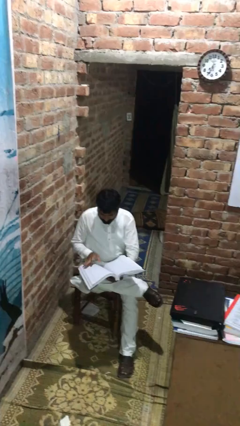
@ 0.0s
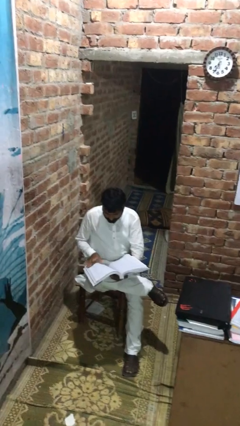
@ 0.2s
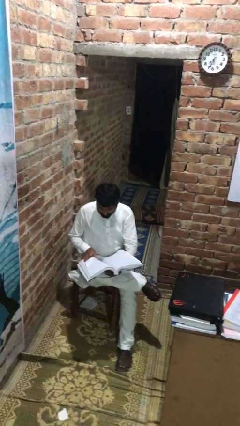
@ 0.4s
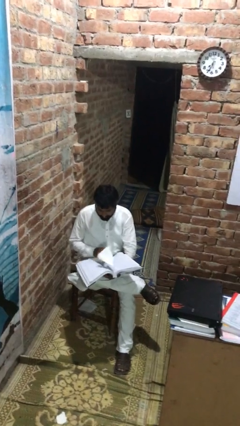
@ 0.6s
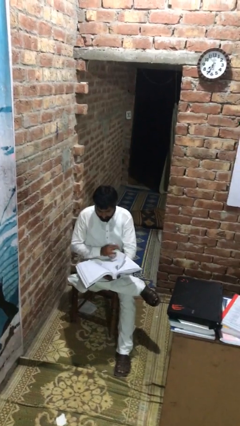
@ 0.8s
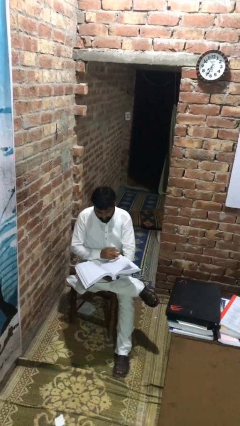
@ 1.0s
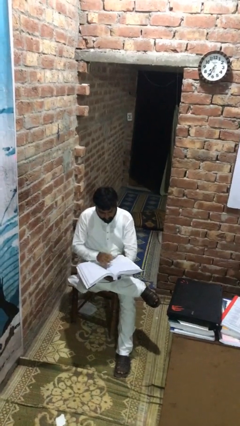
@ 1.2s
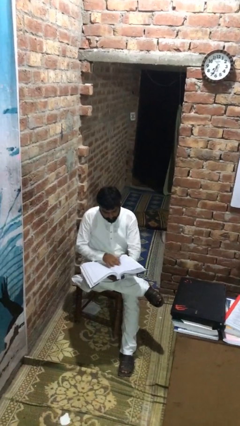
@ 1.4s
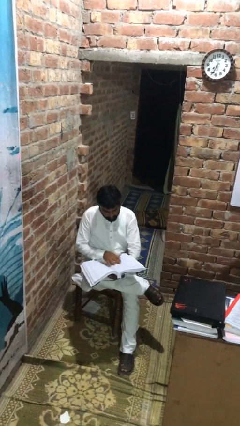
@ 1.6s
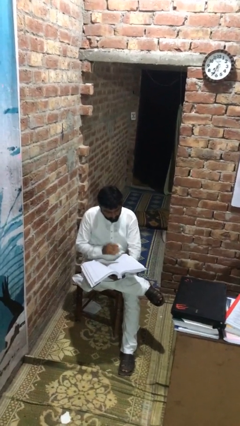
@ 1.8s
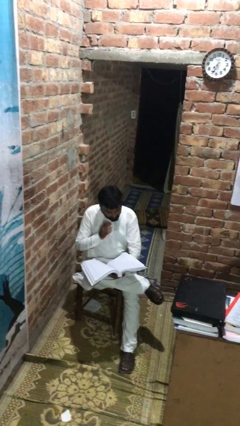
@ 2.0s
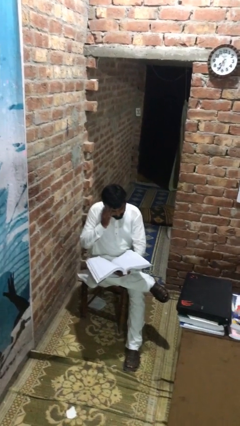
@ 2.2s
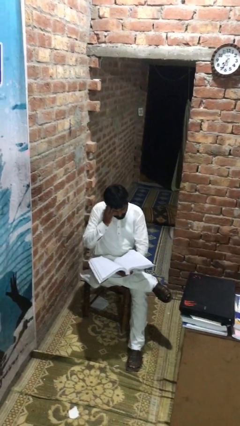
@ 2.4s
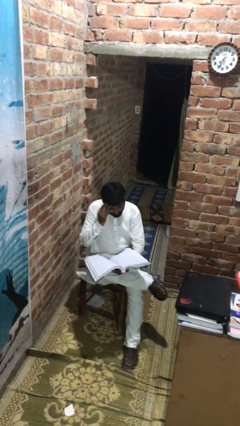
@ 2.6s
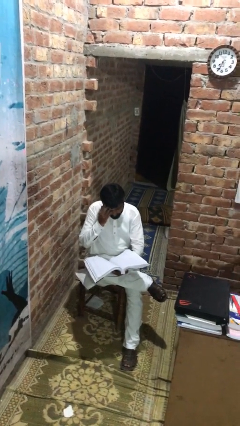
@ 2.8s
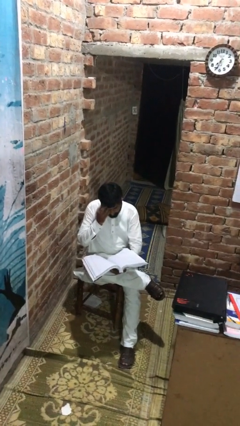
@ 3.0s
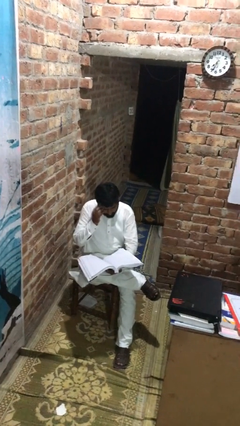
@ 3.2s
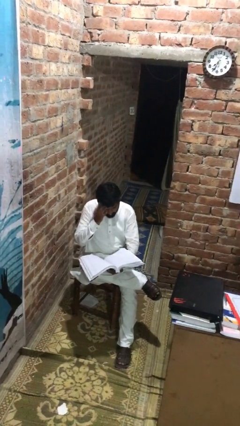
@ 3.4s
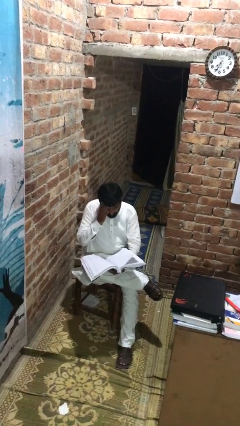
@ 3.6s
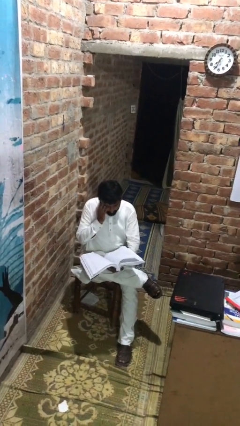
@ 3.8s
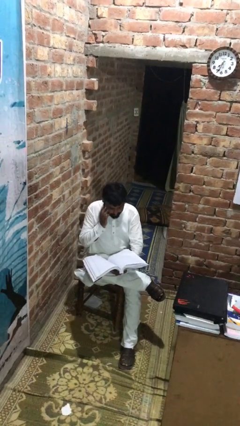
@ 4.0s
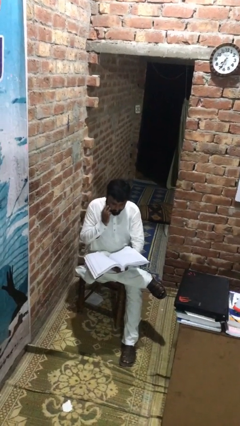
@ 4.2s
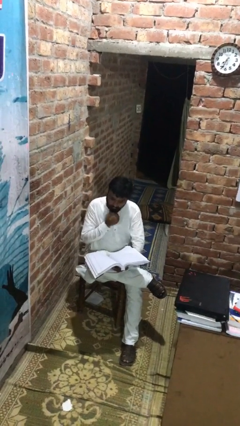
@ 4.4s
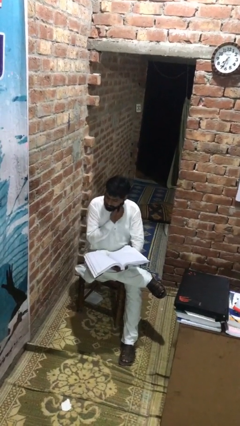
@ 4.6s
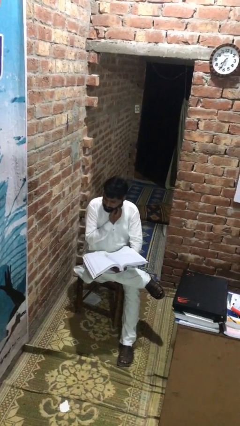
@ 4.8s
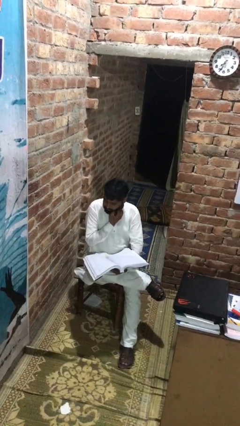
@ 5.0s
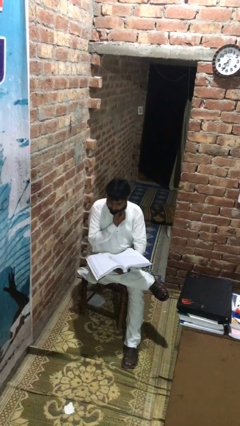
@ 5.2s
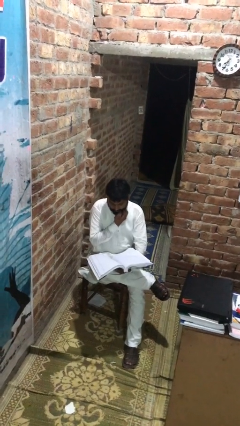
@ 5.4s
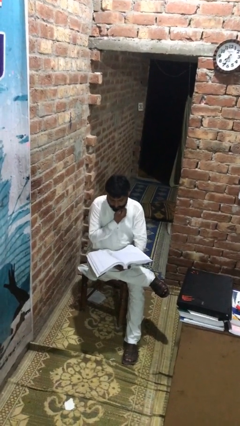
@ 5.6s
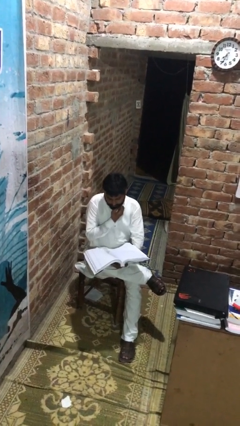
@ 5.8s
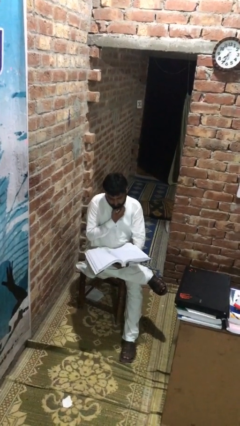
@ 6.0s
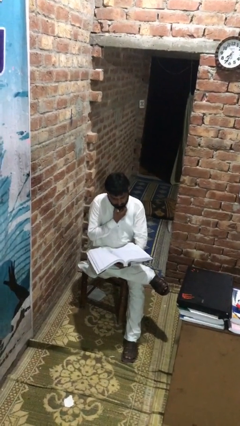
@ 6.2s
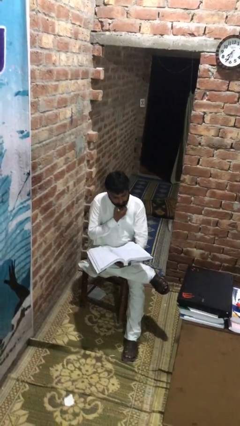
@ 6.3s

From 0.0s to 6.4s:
person reads document

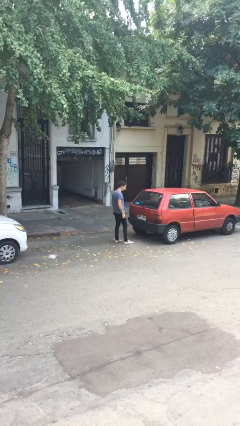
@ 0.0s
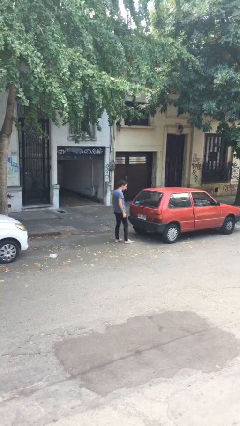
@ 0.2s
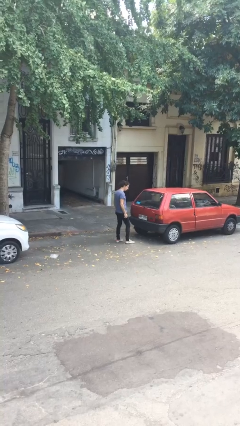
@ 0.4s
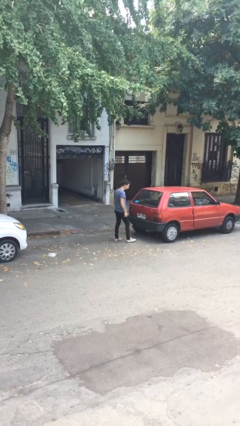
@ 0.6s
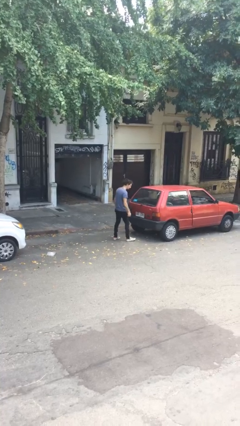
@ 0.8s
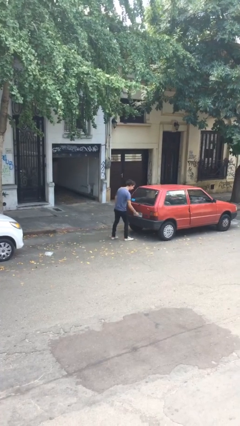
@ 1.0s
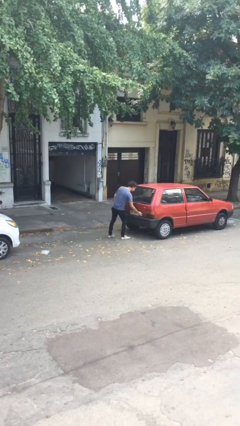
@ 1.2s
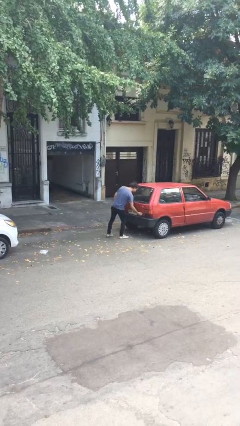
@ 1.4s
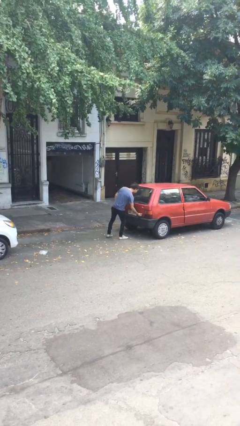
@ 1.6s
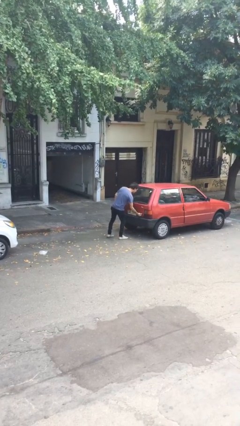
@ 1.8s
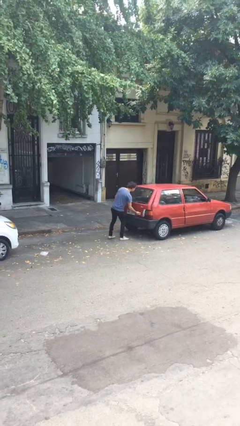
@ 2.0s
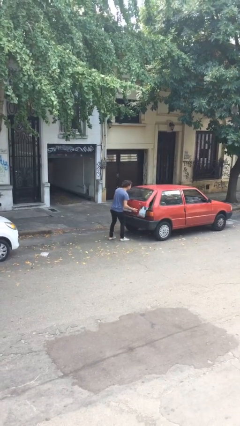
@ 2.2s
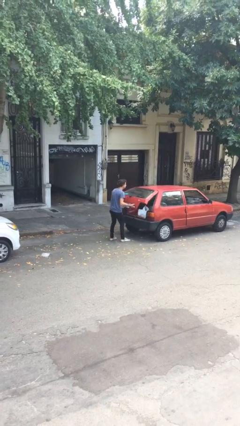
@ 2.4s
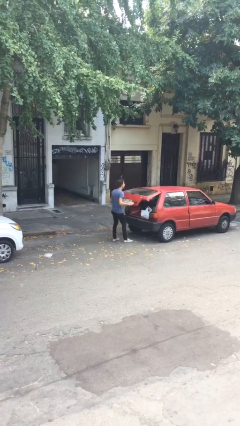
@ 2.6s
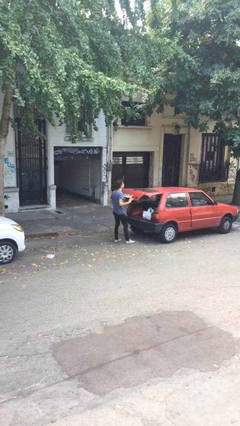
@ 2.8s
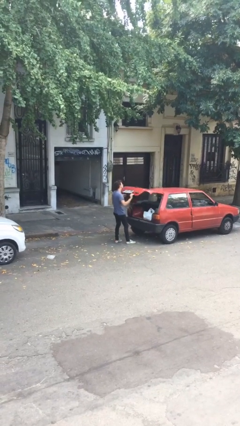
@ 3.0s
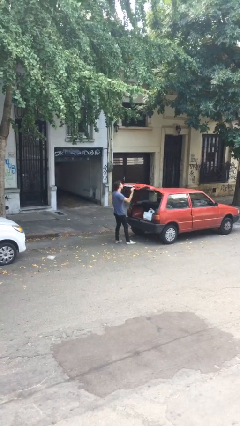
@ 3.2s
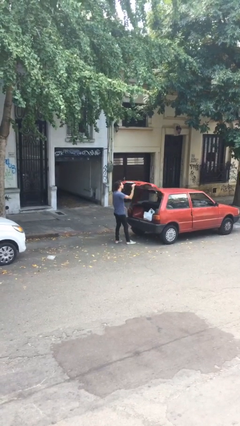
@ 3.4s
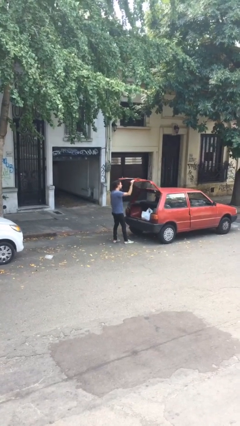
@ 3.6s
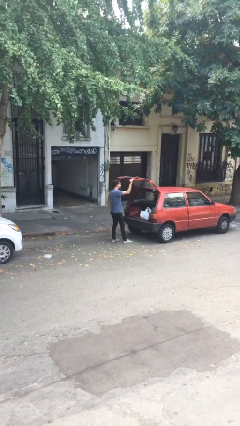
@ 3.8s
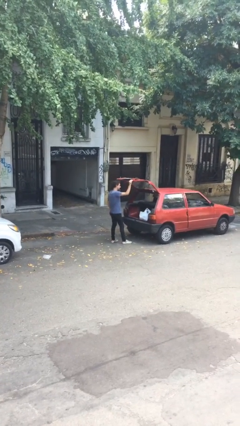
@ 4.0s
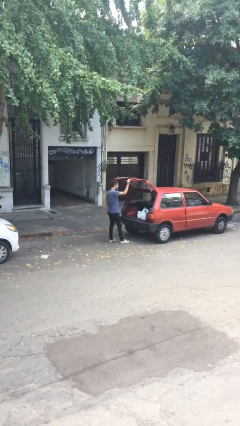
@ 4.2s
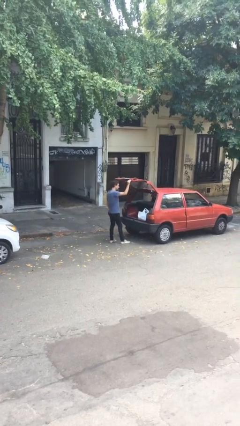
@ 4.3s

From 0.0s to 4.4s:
person opens car trunk

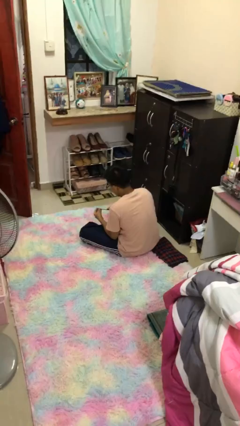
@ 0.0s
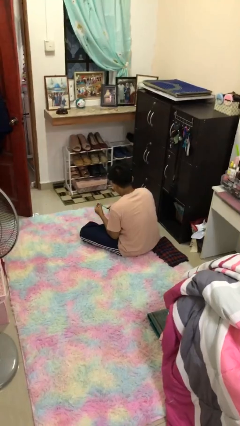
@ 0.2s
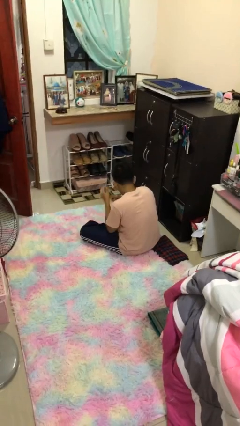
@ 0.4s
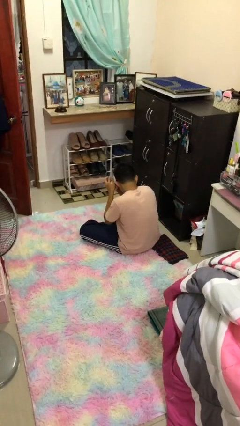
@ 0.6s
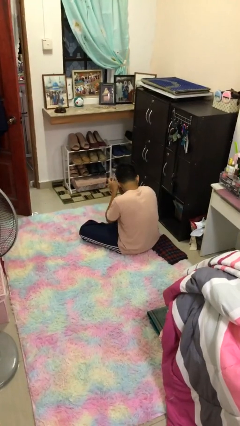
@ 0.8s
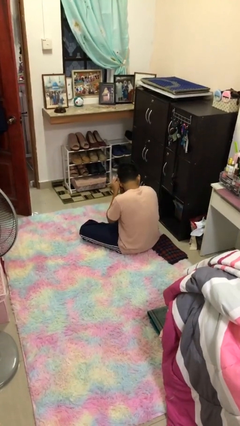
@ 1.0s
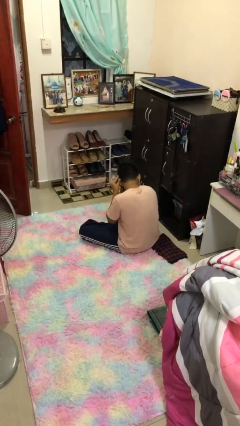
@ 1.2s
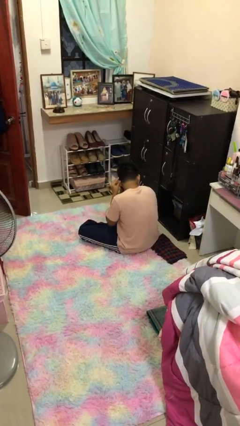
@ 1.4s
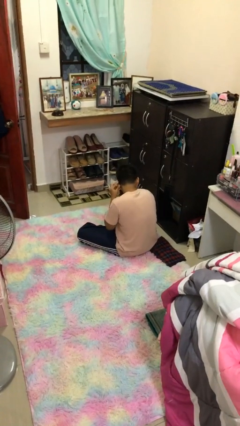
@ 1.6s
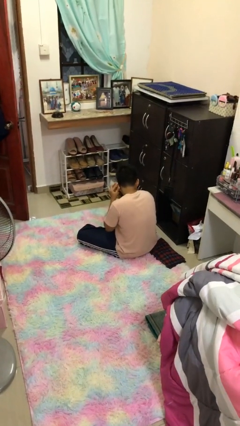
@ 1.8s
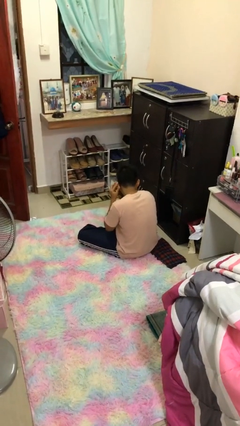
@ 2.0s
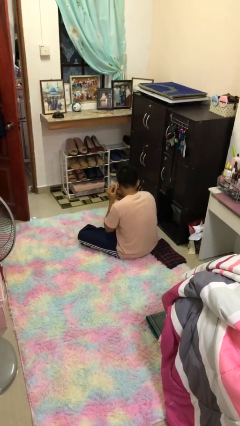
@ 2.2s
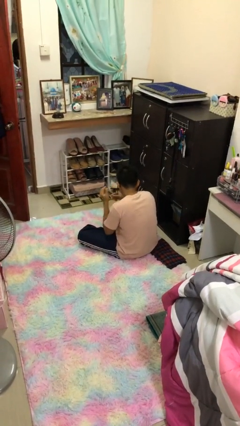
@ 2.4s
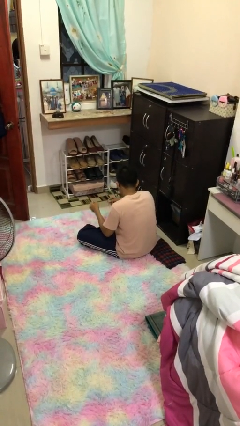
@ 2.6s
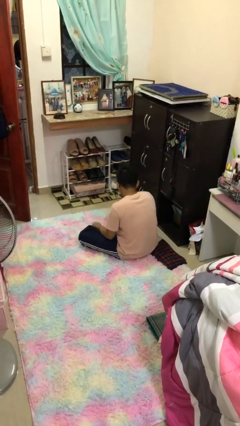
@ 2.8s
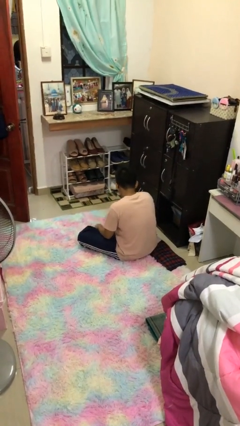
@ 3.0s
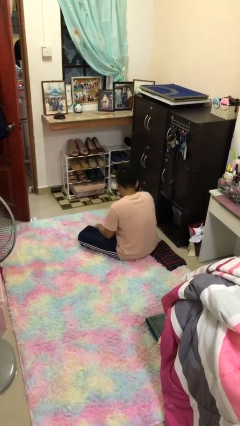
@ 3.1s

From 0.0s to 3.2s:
person puts on earrings

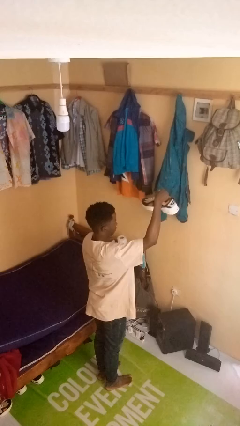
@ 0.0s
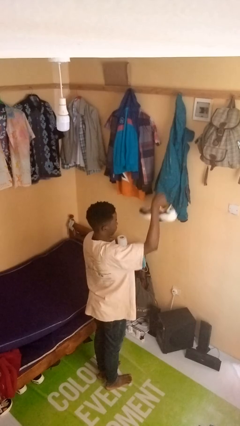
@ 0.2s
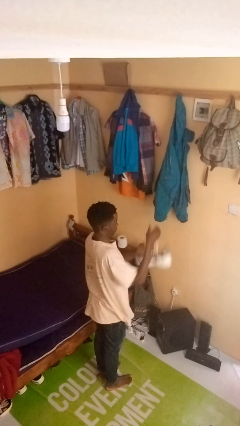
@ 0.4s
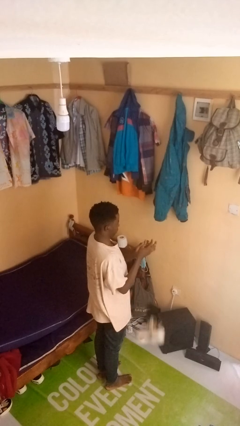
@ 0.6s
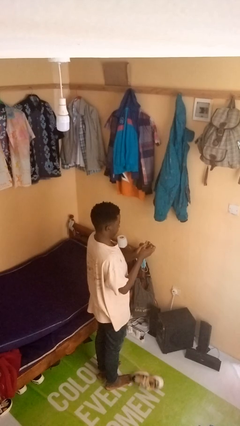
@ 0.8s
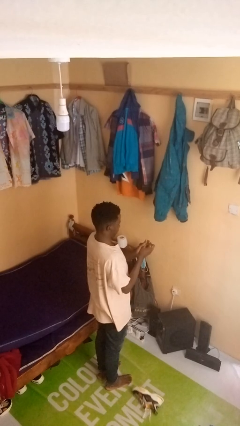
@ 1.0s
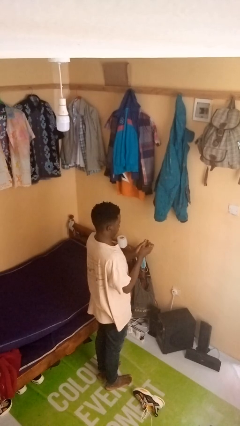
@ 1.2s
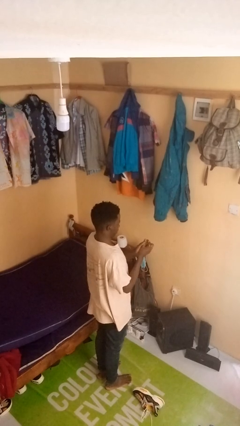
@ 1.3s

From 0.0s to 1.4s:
person drops object

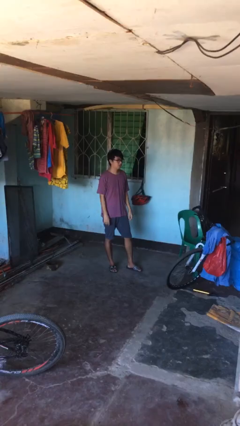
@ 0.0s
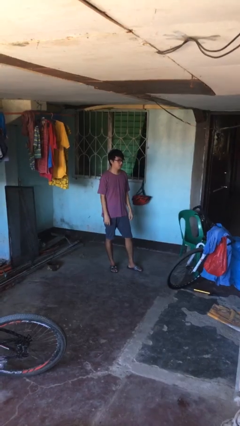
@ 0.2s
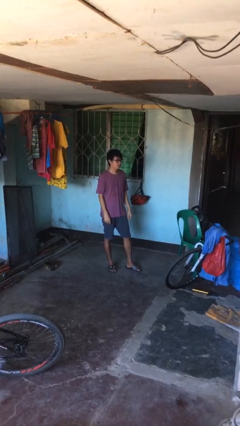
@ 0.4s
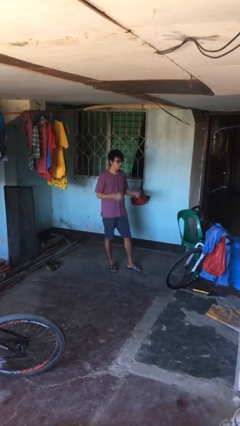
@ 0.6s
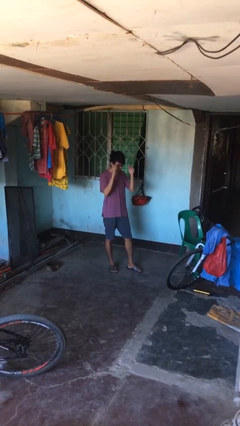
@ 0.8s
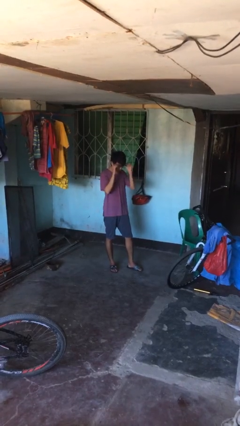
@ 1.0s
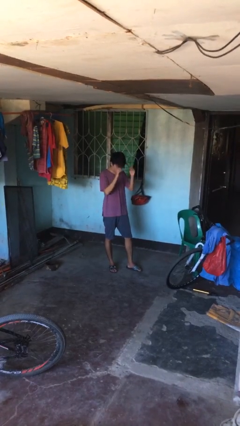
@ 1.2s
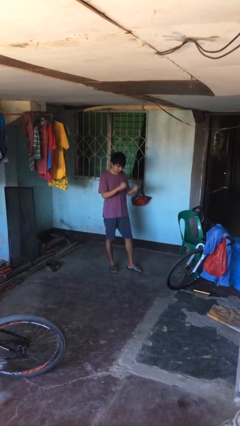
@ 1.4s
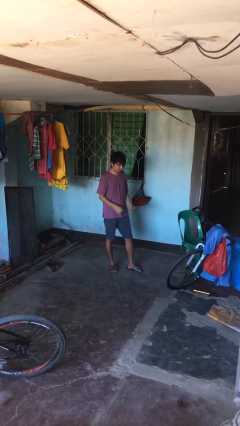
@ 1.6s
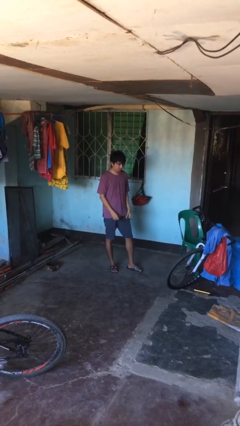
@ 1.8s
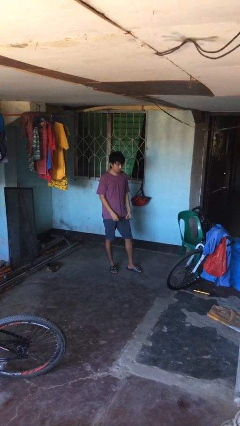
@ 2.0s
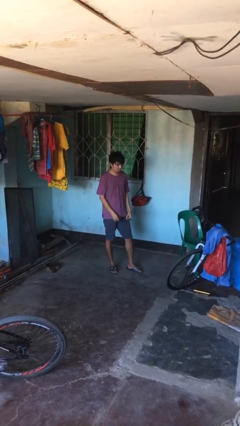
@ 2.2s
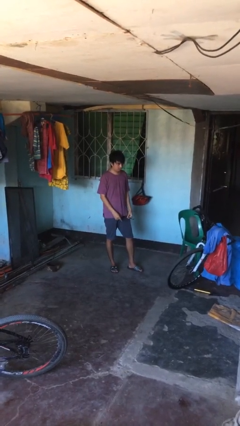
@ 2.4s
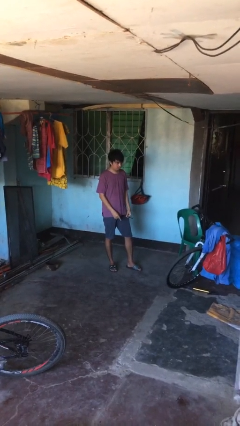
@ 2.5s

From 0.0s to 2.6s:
person takes off glasses
